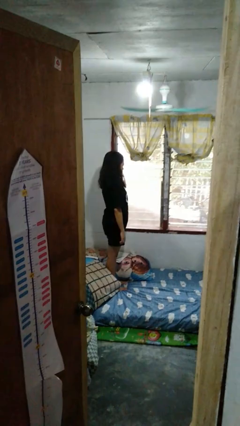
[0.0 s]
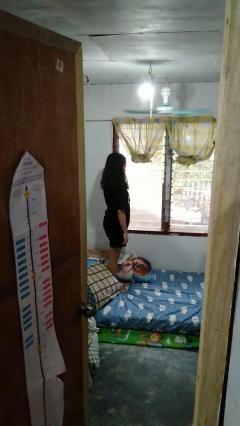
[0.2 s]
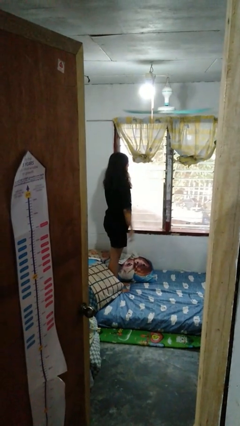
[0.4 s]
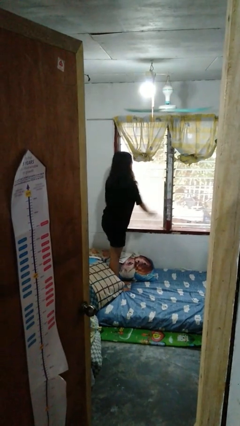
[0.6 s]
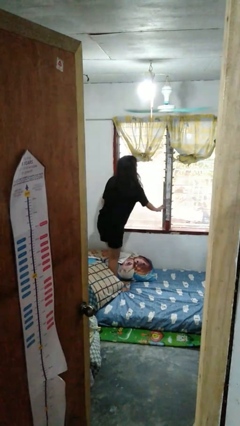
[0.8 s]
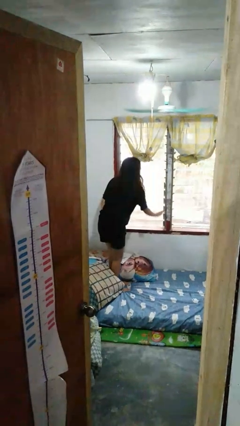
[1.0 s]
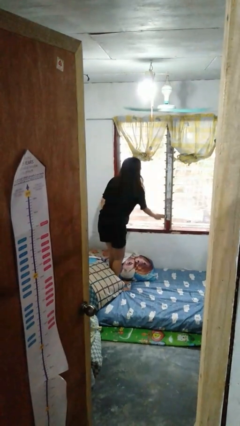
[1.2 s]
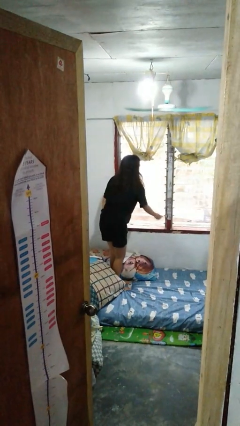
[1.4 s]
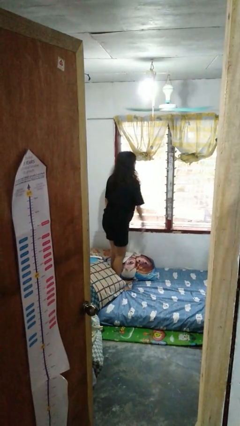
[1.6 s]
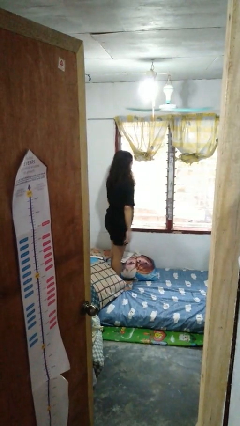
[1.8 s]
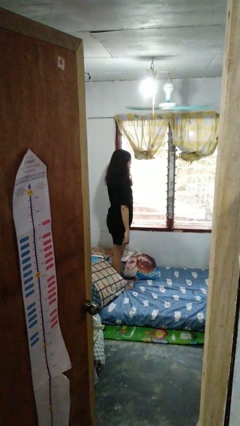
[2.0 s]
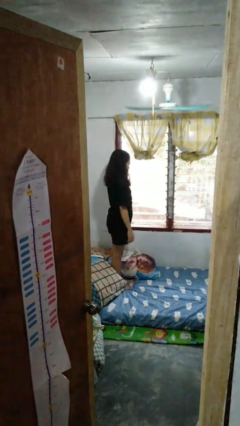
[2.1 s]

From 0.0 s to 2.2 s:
person opens home window

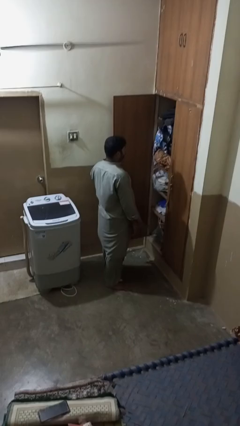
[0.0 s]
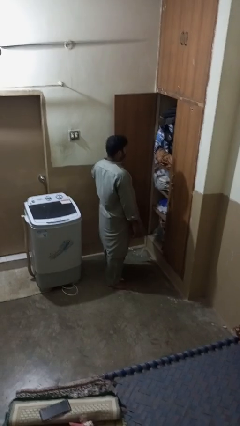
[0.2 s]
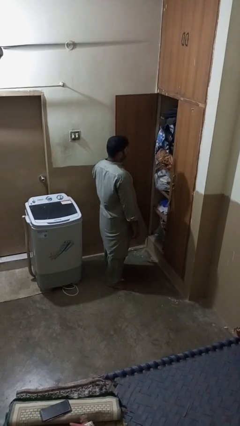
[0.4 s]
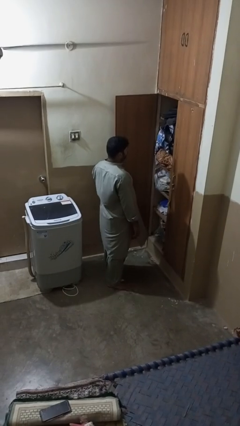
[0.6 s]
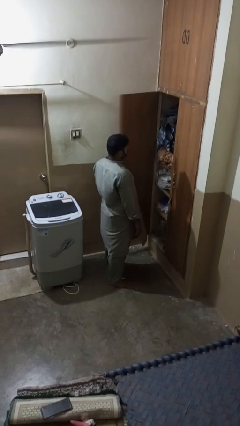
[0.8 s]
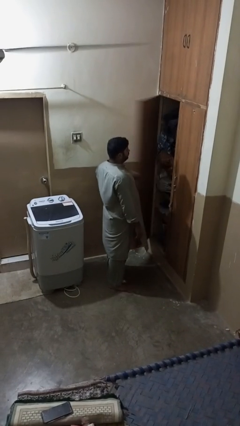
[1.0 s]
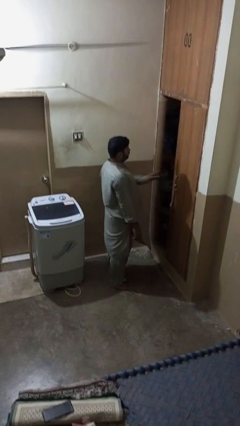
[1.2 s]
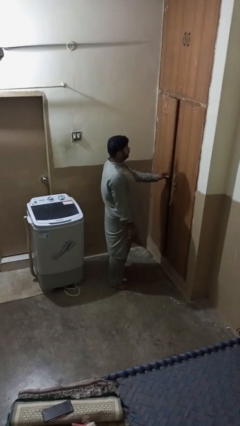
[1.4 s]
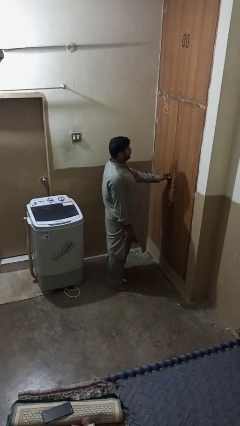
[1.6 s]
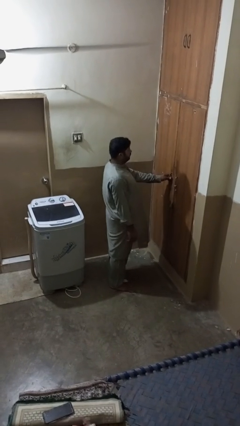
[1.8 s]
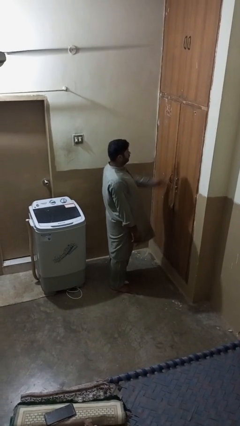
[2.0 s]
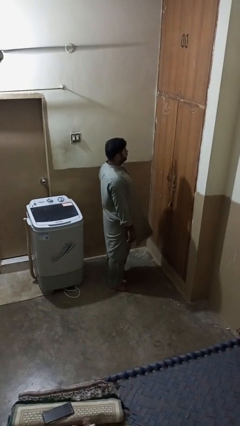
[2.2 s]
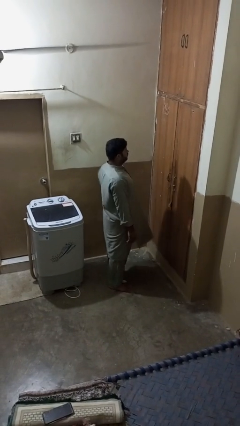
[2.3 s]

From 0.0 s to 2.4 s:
person closes closet door

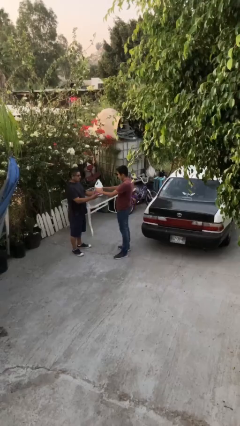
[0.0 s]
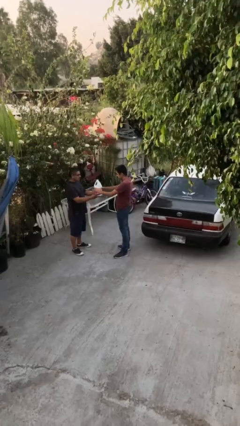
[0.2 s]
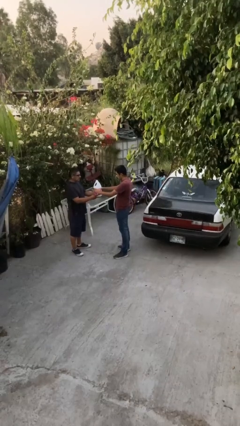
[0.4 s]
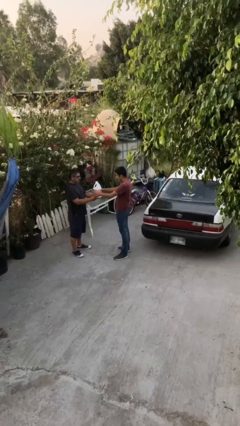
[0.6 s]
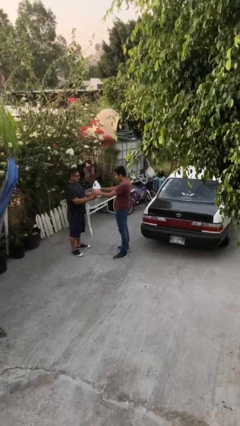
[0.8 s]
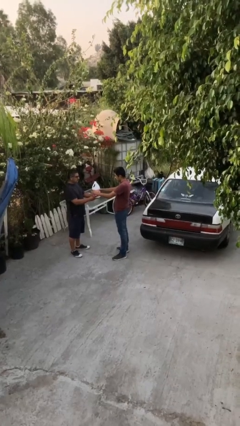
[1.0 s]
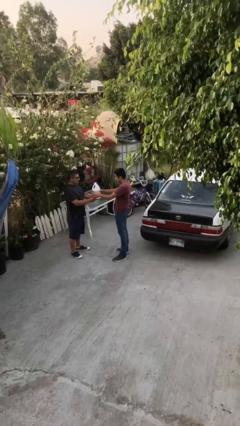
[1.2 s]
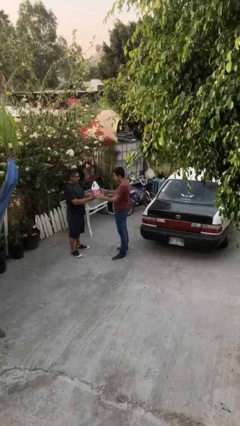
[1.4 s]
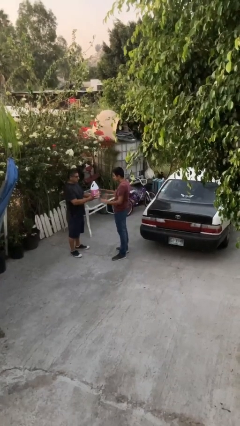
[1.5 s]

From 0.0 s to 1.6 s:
person transfers object to person

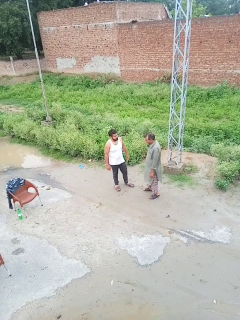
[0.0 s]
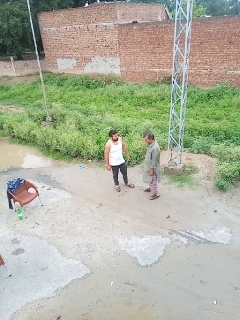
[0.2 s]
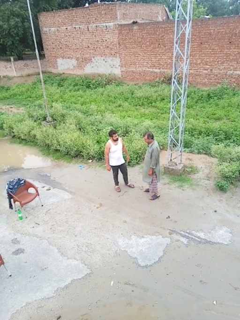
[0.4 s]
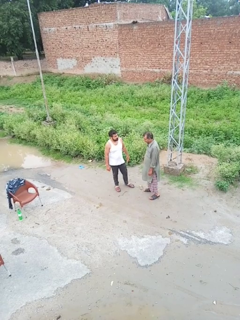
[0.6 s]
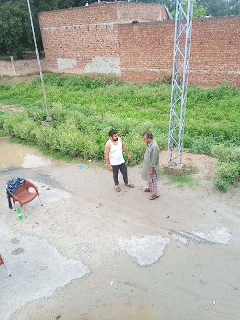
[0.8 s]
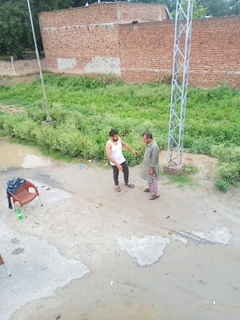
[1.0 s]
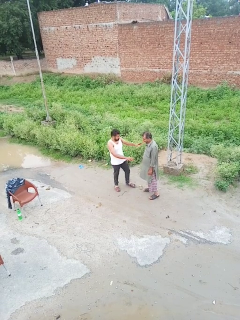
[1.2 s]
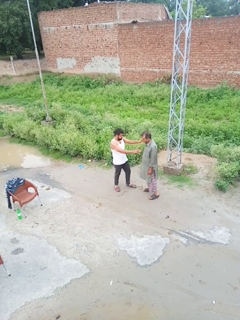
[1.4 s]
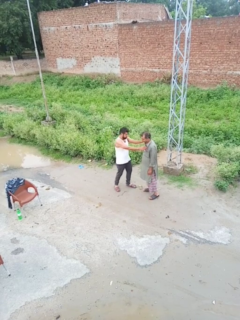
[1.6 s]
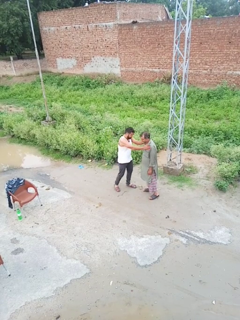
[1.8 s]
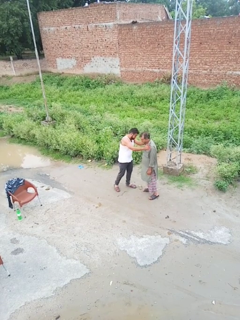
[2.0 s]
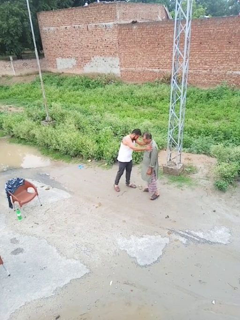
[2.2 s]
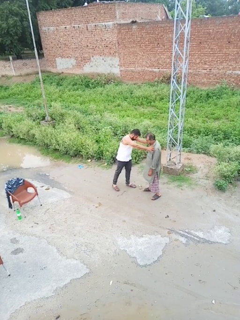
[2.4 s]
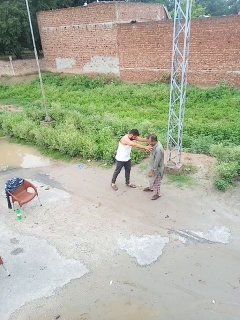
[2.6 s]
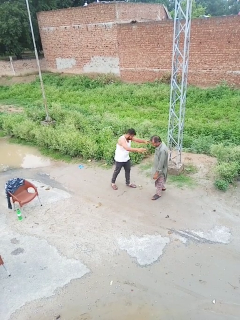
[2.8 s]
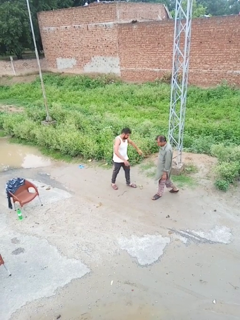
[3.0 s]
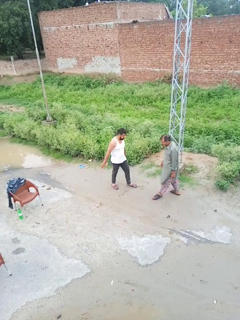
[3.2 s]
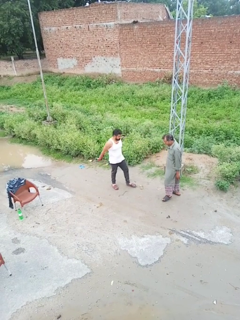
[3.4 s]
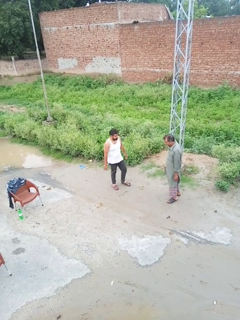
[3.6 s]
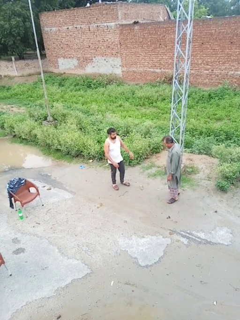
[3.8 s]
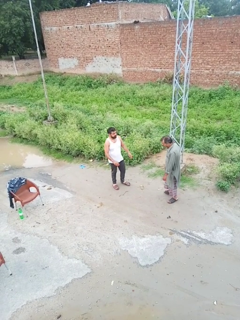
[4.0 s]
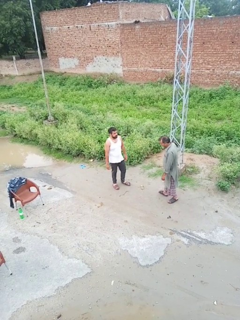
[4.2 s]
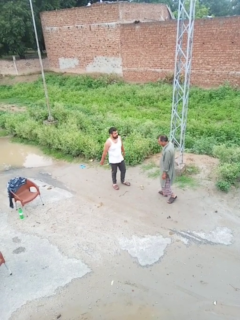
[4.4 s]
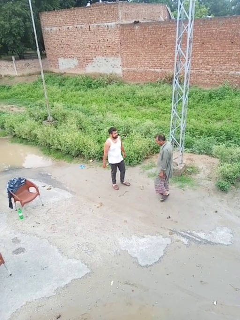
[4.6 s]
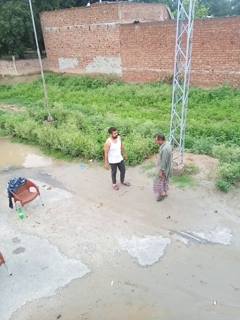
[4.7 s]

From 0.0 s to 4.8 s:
person shoves person

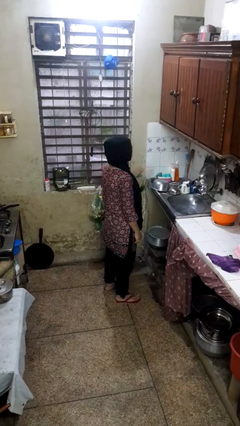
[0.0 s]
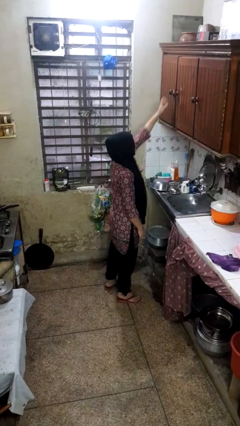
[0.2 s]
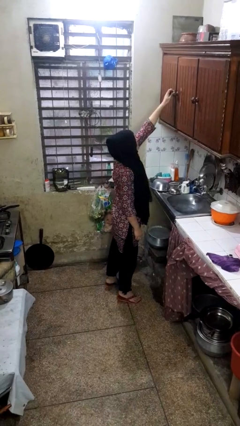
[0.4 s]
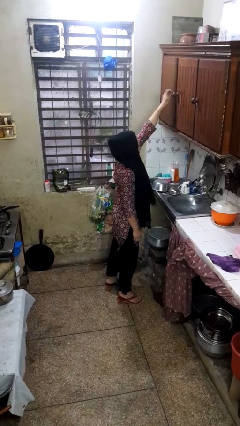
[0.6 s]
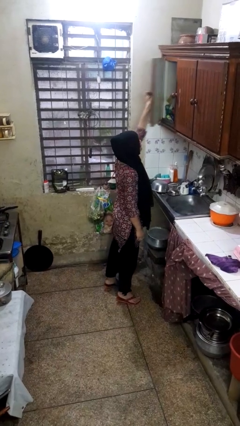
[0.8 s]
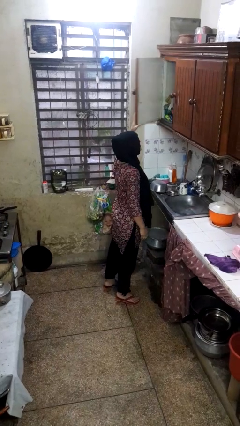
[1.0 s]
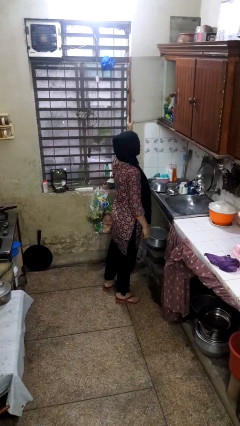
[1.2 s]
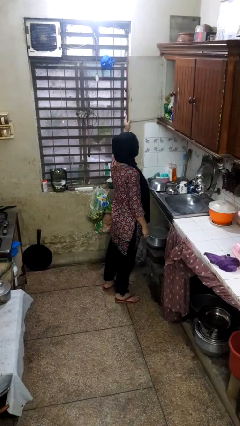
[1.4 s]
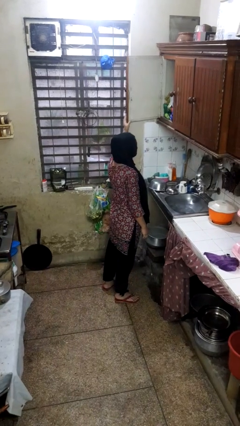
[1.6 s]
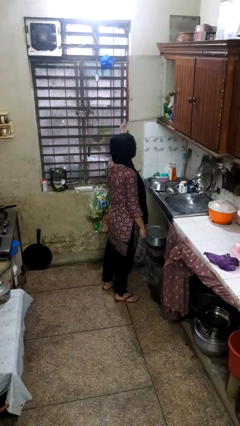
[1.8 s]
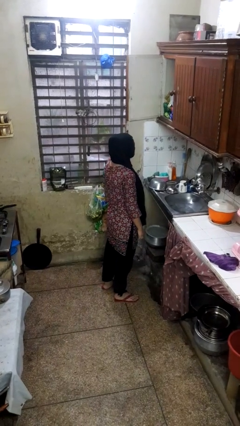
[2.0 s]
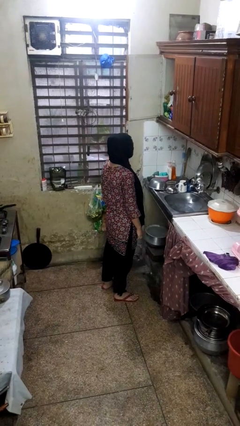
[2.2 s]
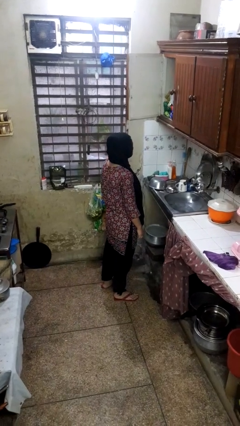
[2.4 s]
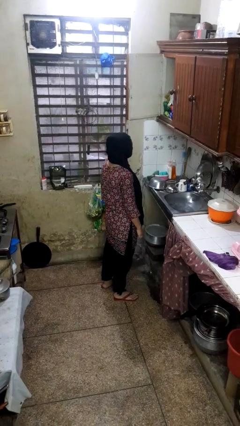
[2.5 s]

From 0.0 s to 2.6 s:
person opens cabinet

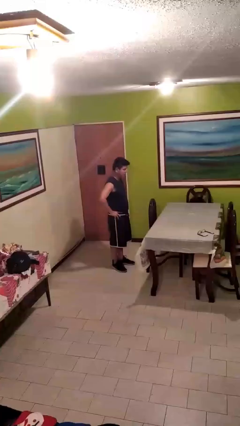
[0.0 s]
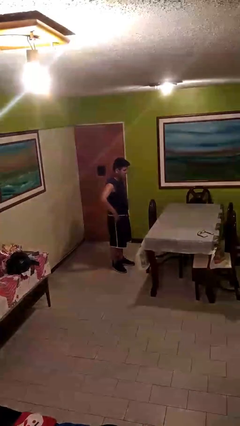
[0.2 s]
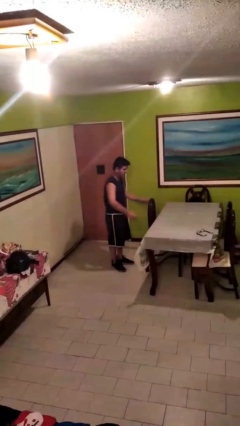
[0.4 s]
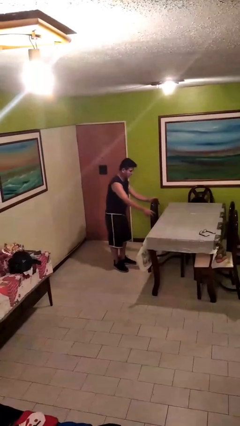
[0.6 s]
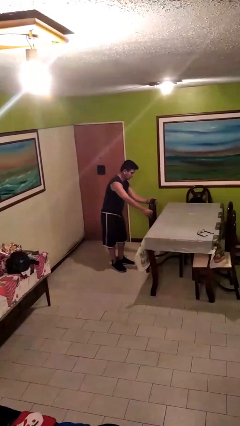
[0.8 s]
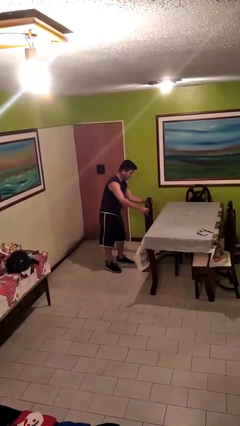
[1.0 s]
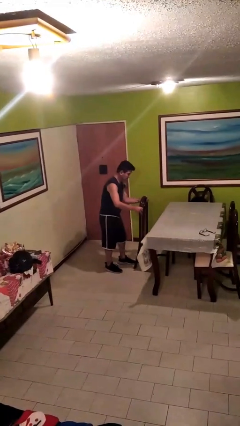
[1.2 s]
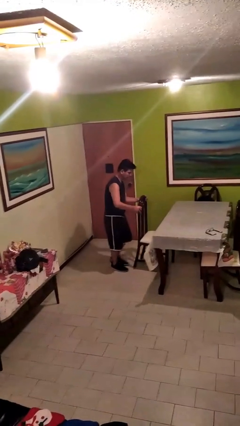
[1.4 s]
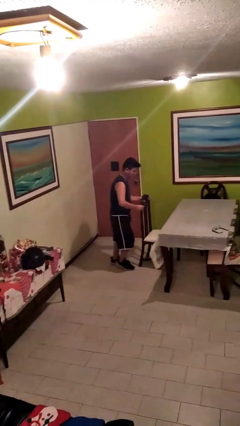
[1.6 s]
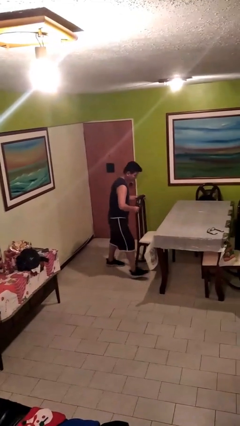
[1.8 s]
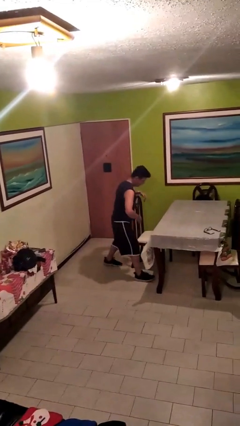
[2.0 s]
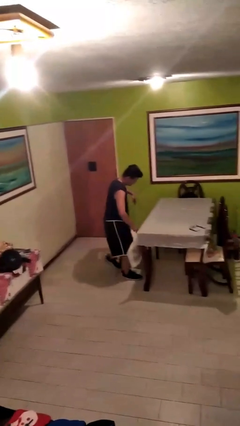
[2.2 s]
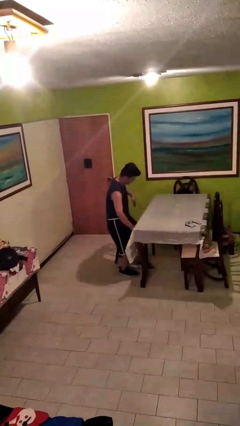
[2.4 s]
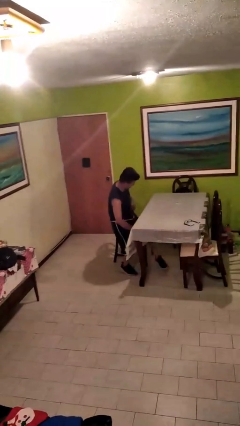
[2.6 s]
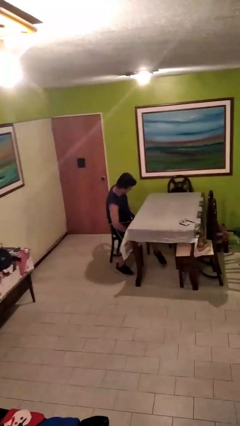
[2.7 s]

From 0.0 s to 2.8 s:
person stands up

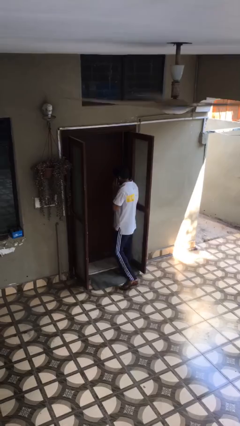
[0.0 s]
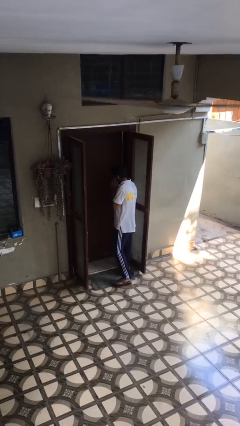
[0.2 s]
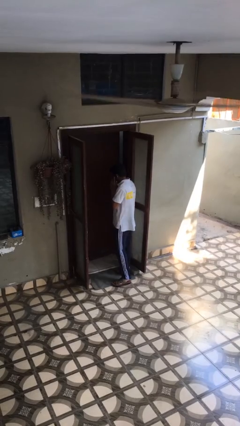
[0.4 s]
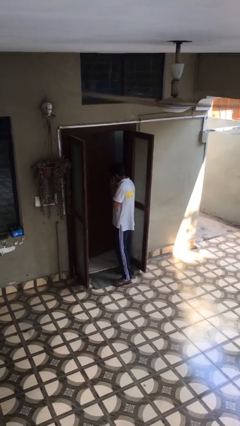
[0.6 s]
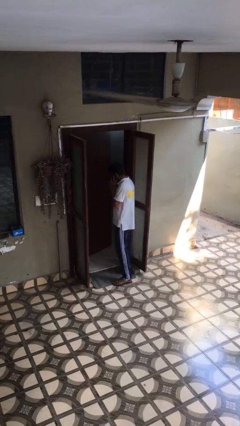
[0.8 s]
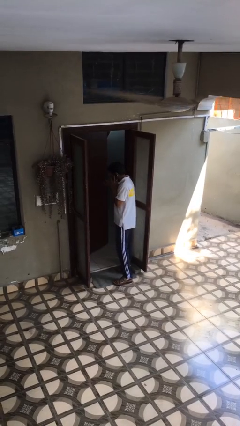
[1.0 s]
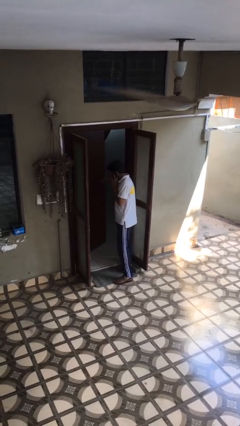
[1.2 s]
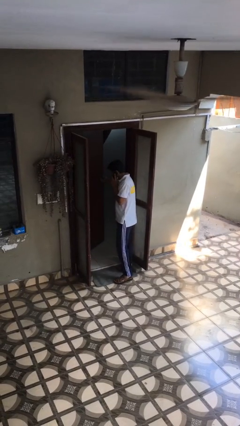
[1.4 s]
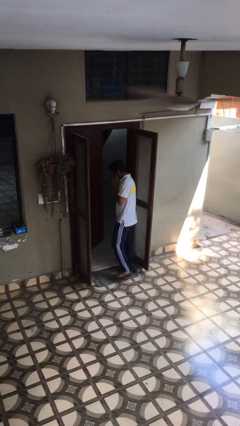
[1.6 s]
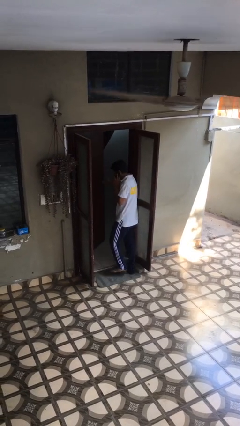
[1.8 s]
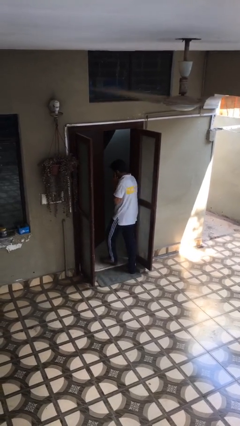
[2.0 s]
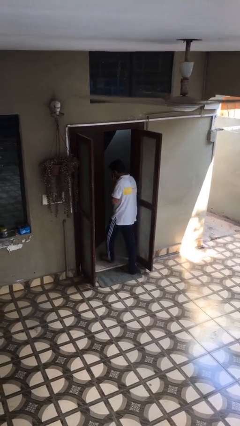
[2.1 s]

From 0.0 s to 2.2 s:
person opens facility door
